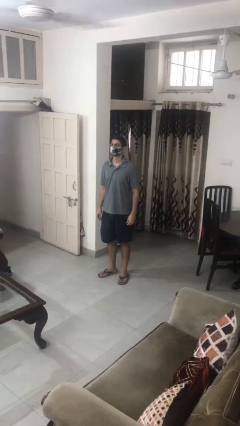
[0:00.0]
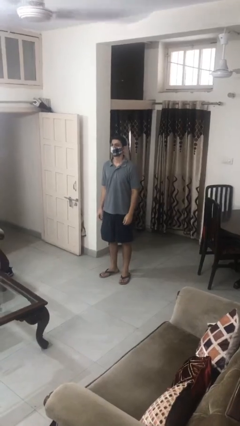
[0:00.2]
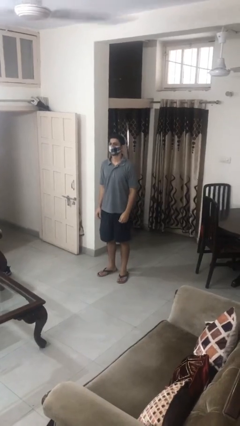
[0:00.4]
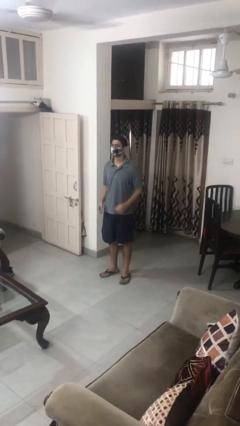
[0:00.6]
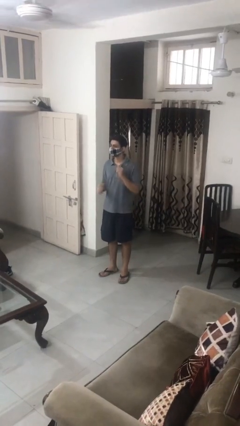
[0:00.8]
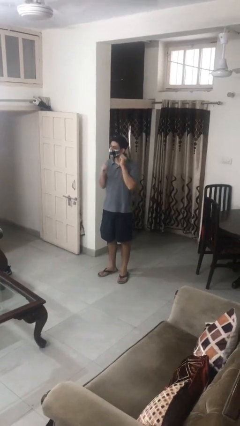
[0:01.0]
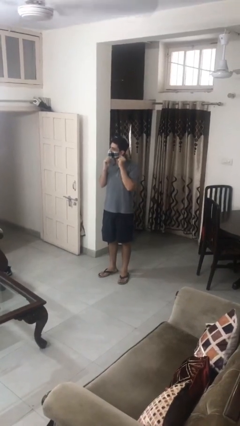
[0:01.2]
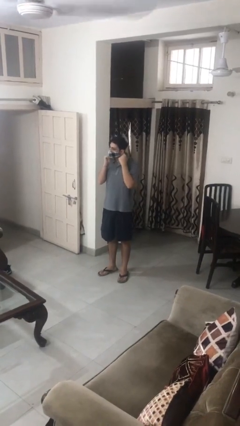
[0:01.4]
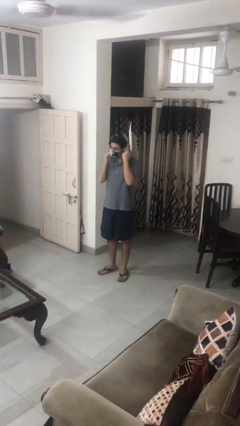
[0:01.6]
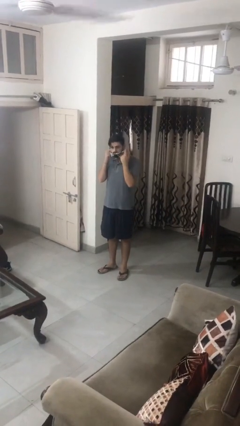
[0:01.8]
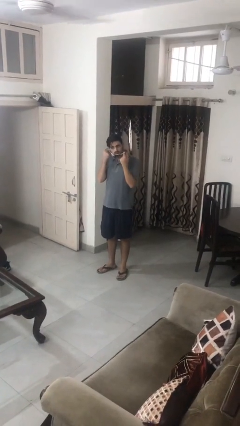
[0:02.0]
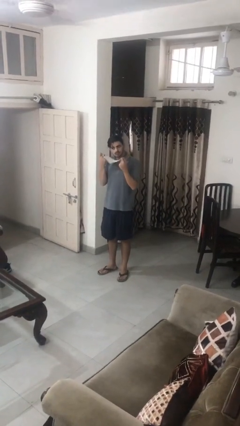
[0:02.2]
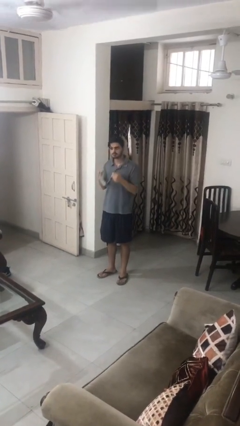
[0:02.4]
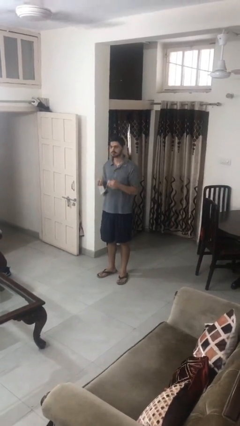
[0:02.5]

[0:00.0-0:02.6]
person takes off facemask

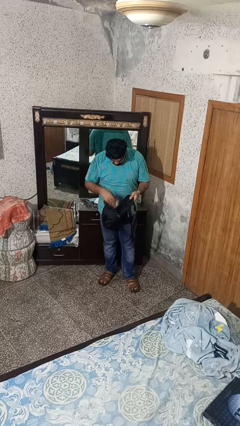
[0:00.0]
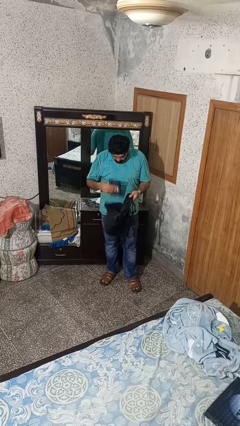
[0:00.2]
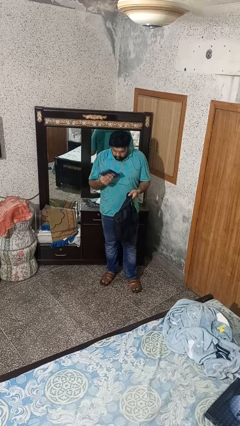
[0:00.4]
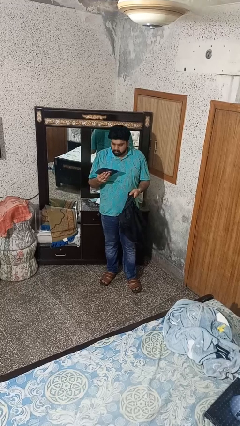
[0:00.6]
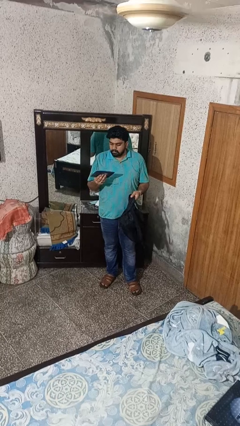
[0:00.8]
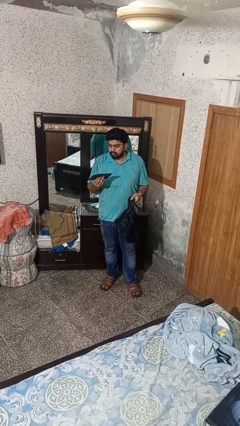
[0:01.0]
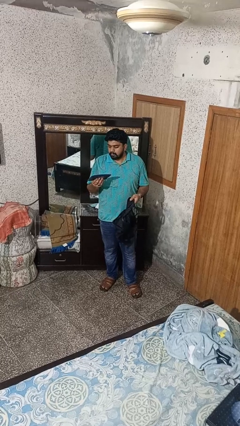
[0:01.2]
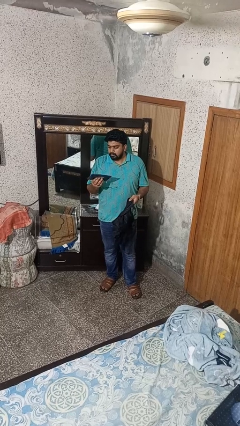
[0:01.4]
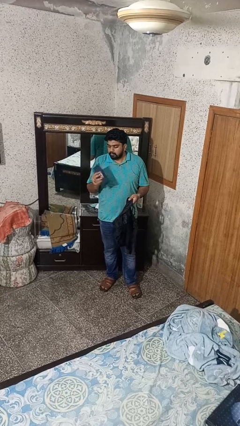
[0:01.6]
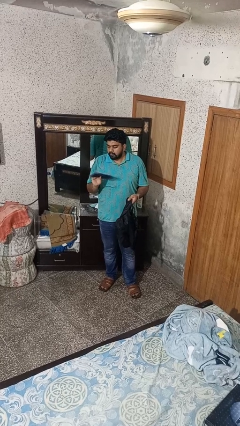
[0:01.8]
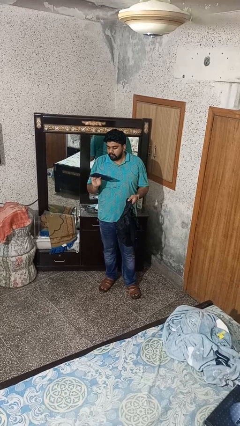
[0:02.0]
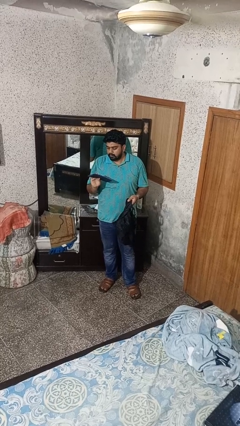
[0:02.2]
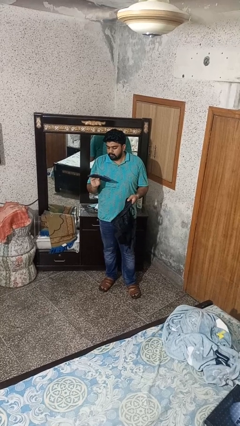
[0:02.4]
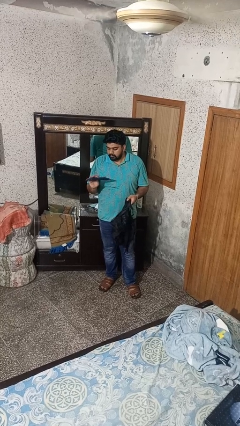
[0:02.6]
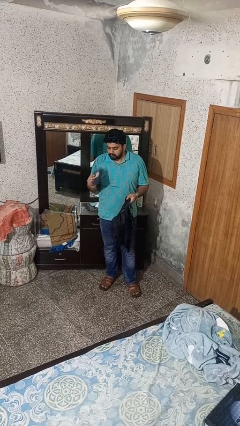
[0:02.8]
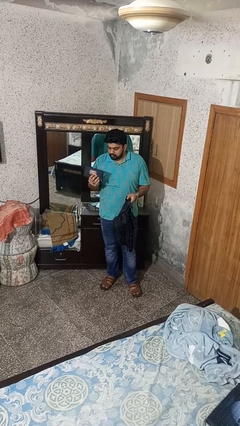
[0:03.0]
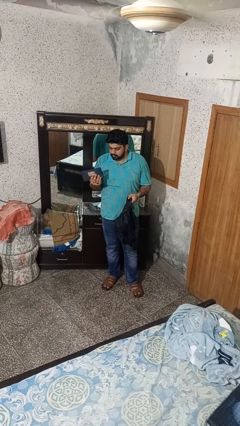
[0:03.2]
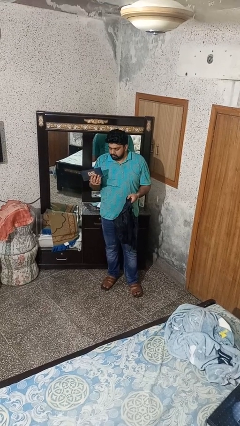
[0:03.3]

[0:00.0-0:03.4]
person takes object from backpack

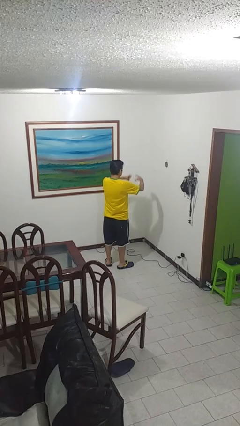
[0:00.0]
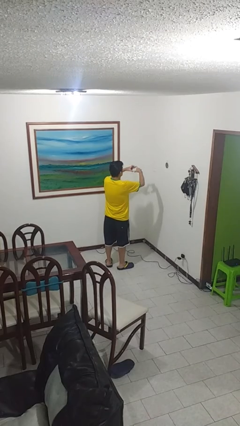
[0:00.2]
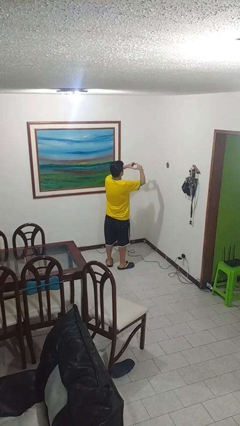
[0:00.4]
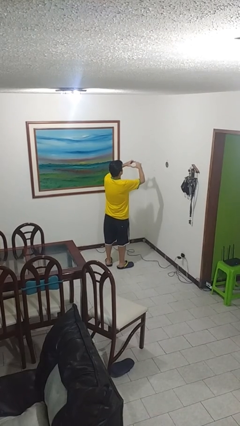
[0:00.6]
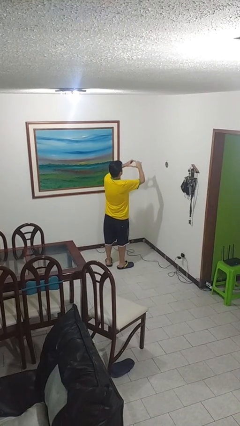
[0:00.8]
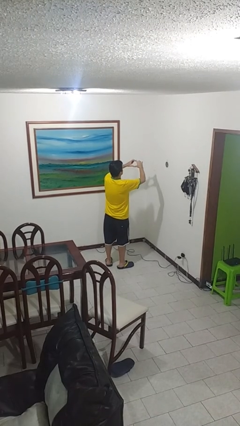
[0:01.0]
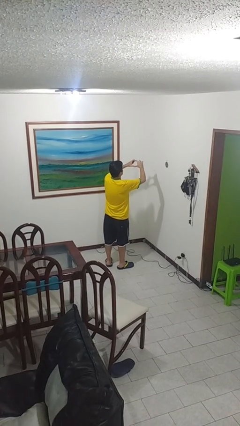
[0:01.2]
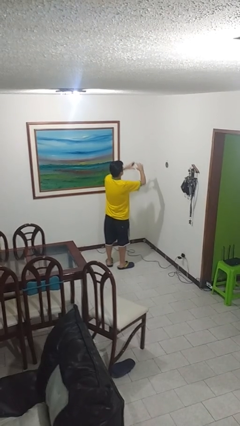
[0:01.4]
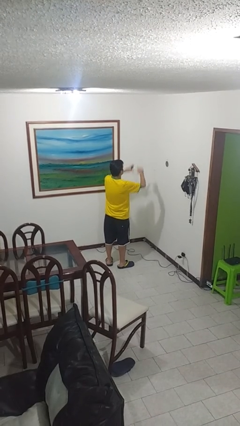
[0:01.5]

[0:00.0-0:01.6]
person gestures heart

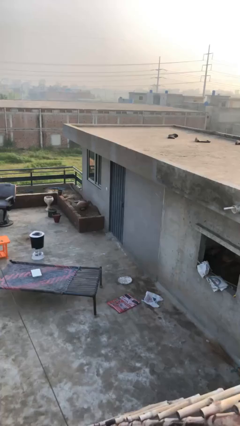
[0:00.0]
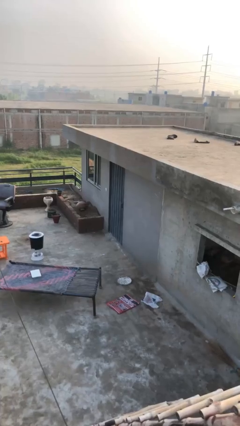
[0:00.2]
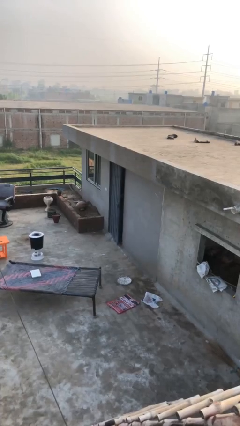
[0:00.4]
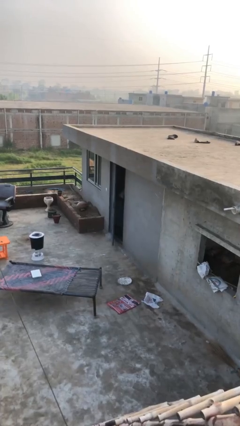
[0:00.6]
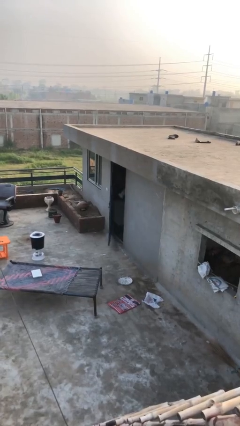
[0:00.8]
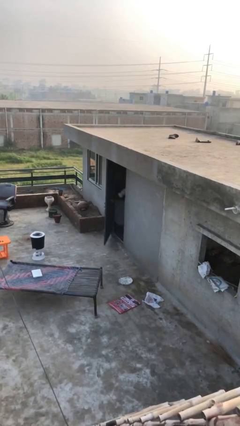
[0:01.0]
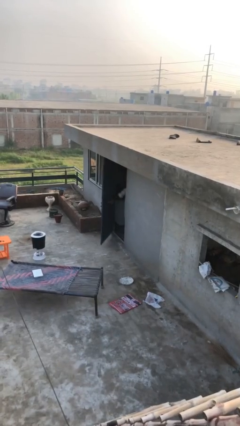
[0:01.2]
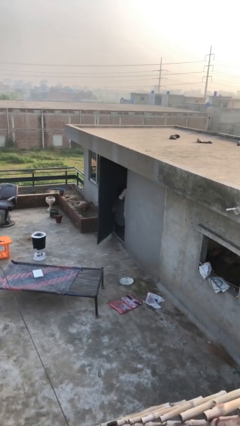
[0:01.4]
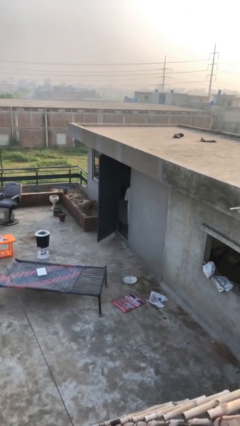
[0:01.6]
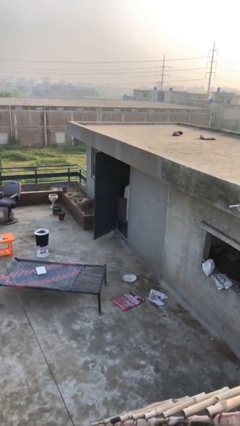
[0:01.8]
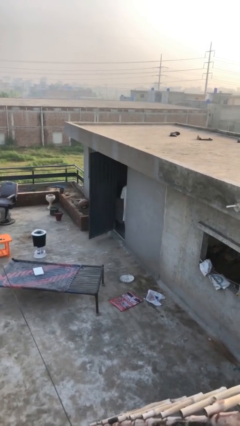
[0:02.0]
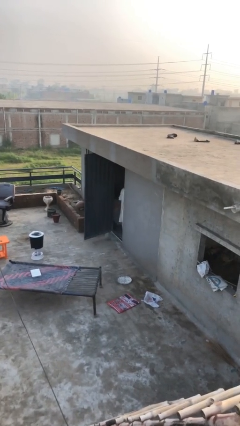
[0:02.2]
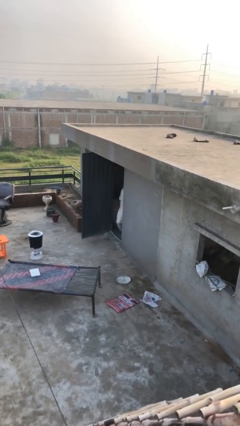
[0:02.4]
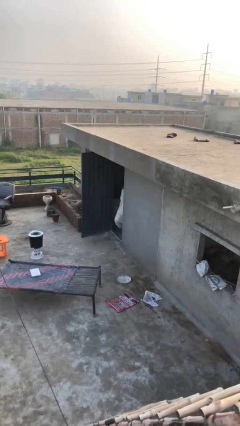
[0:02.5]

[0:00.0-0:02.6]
person opens facility door

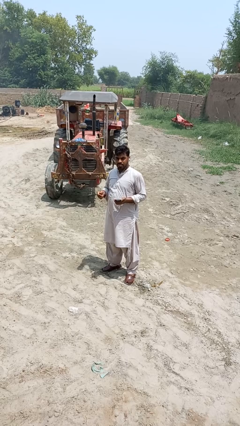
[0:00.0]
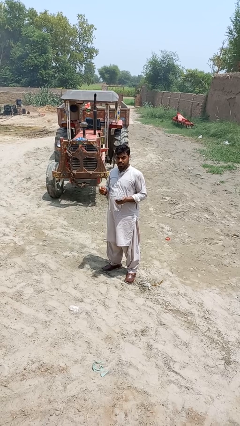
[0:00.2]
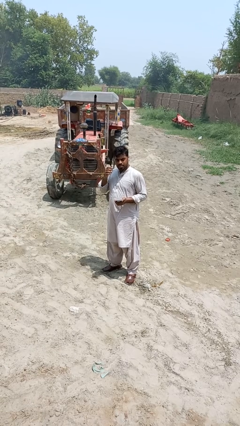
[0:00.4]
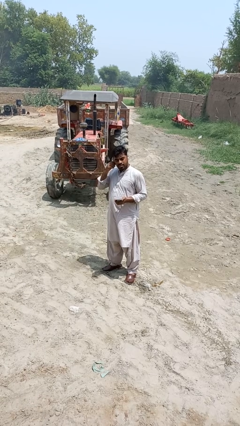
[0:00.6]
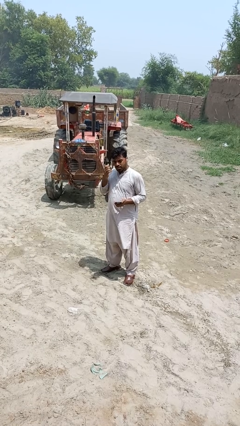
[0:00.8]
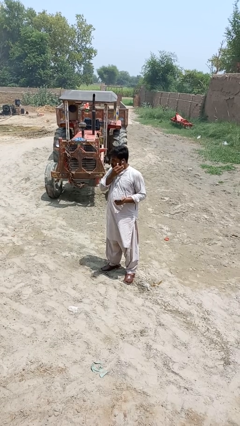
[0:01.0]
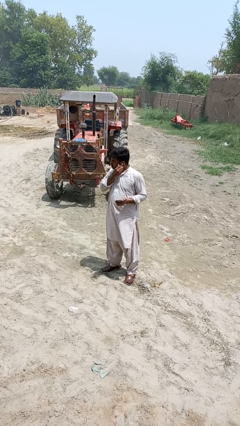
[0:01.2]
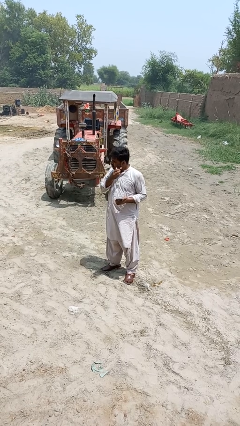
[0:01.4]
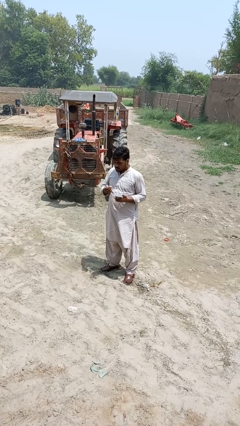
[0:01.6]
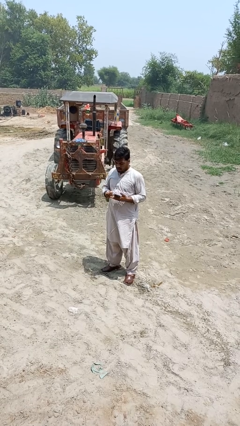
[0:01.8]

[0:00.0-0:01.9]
person takes off headphones

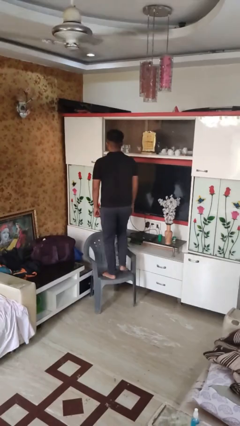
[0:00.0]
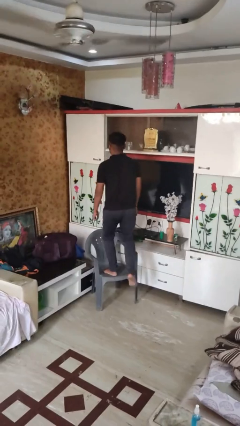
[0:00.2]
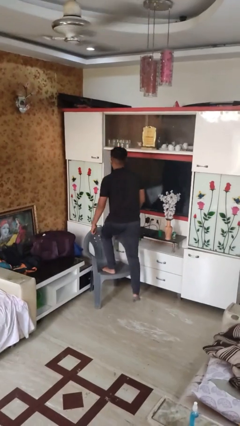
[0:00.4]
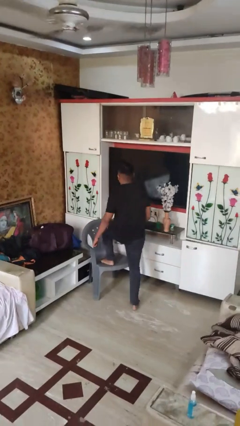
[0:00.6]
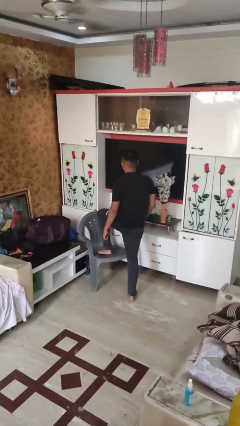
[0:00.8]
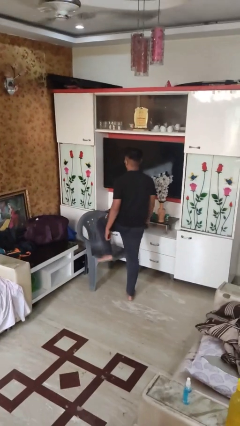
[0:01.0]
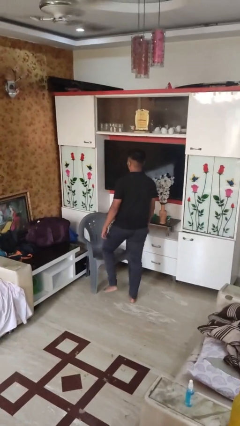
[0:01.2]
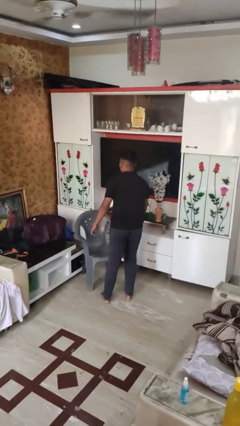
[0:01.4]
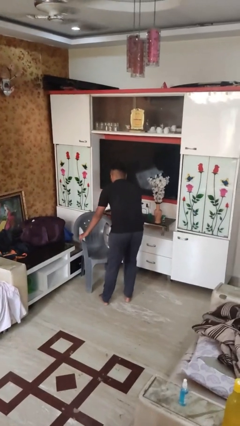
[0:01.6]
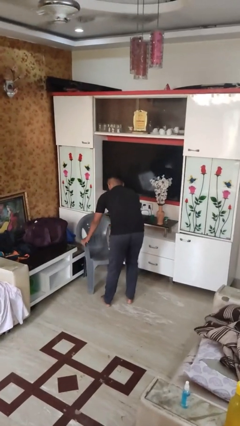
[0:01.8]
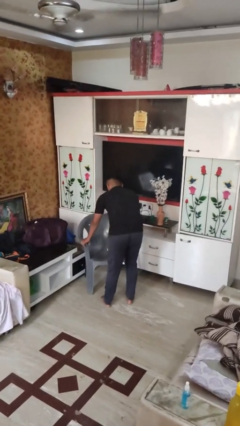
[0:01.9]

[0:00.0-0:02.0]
person climbs off chair

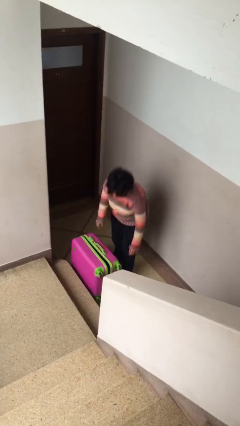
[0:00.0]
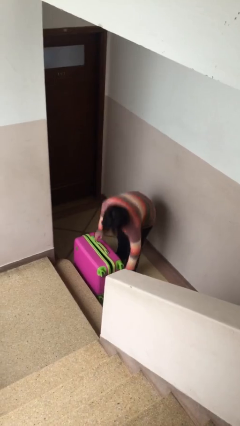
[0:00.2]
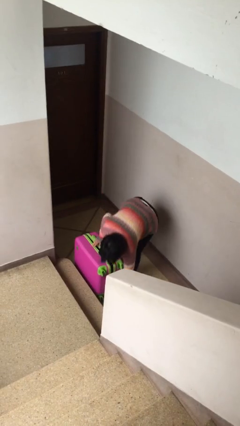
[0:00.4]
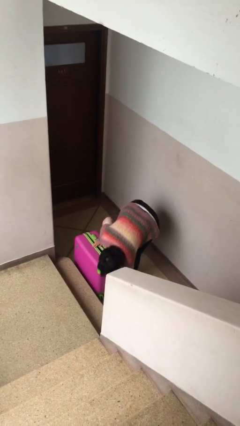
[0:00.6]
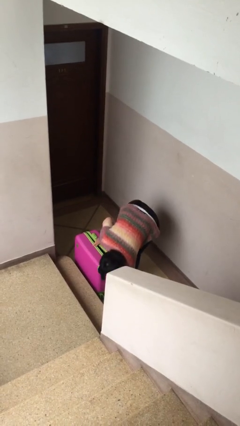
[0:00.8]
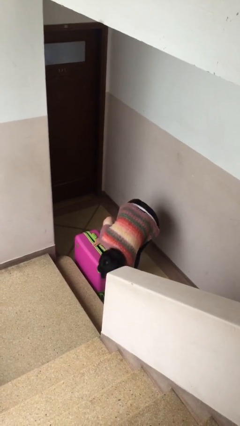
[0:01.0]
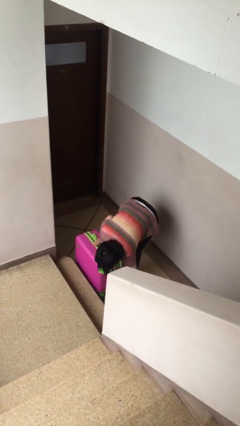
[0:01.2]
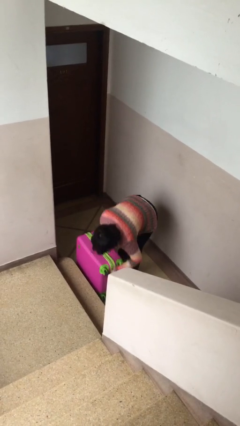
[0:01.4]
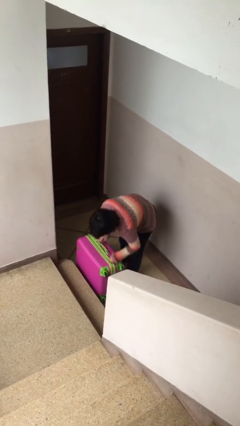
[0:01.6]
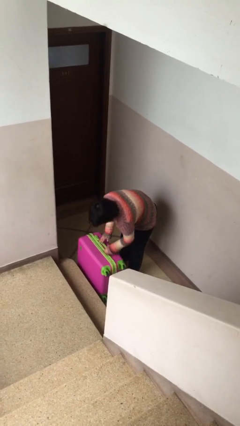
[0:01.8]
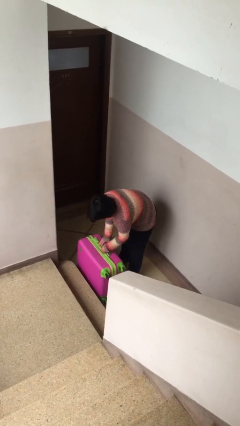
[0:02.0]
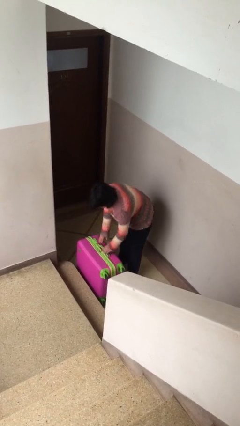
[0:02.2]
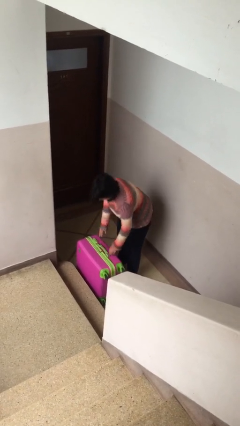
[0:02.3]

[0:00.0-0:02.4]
person closes suitcase

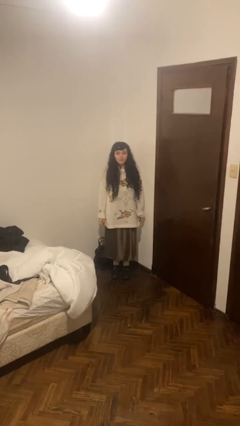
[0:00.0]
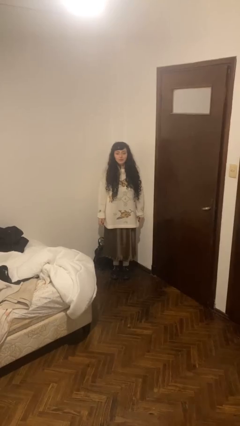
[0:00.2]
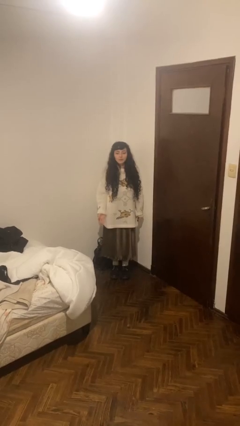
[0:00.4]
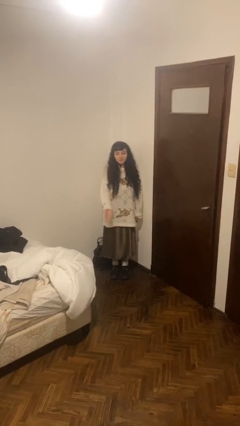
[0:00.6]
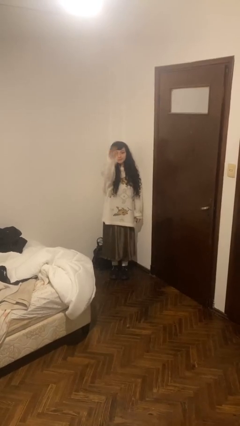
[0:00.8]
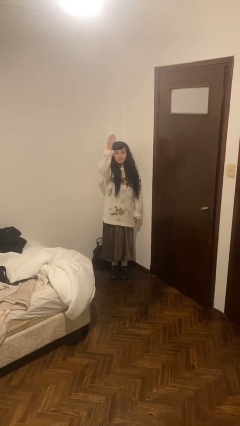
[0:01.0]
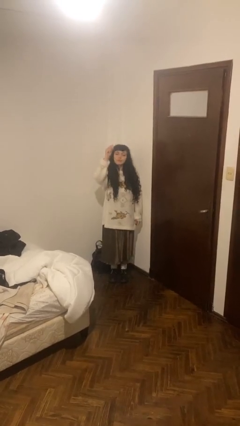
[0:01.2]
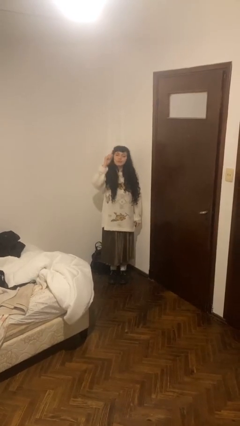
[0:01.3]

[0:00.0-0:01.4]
person gestures swipe up
